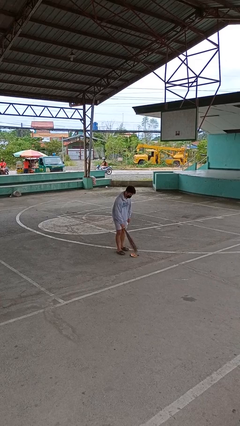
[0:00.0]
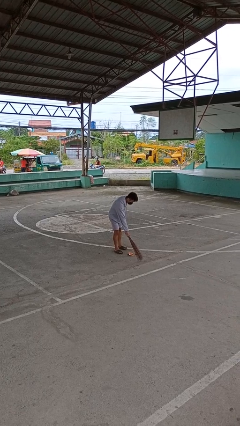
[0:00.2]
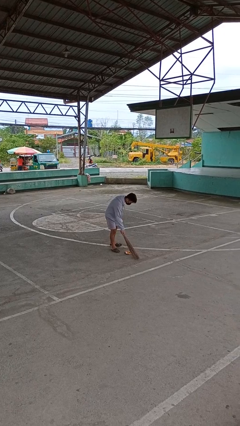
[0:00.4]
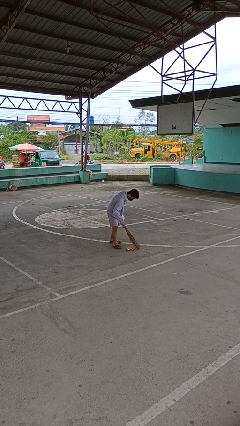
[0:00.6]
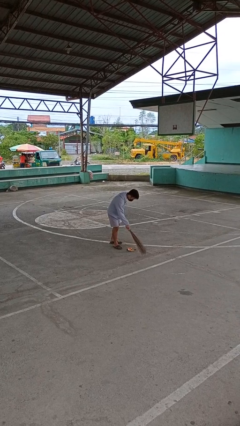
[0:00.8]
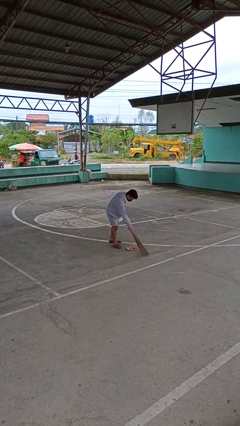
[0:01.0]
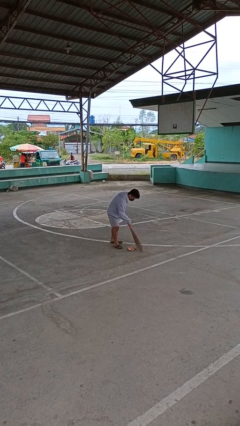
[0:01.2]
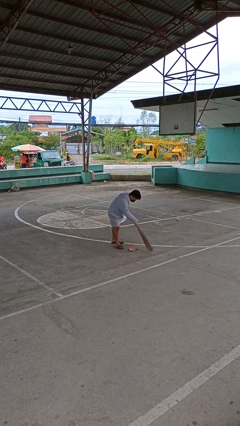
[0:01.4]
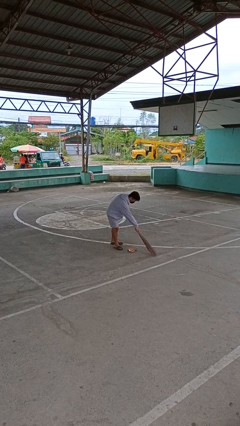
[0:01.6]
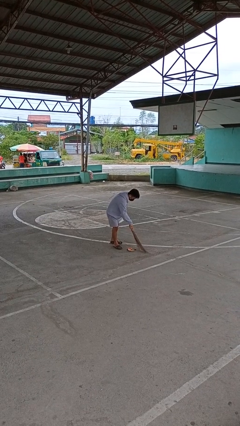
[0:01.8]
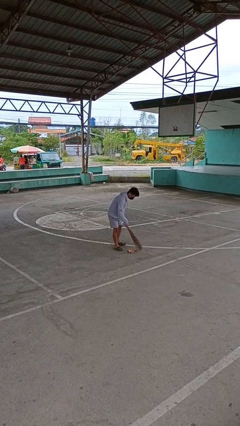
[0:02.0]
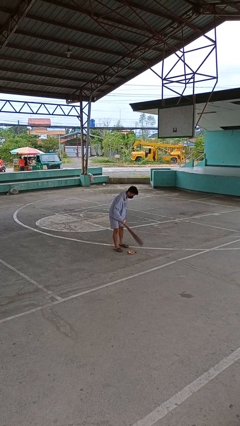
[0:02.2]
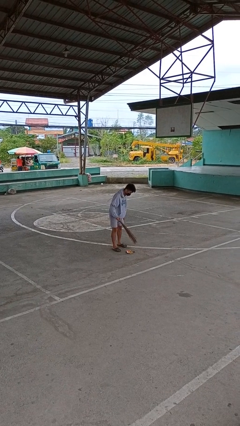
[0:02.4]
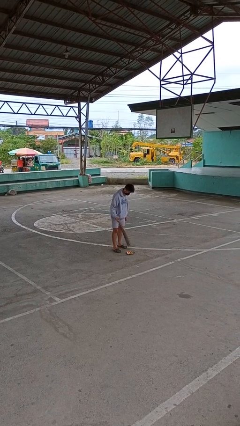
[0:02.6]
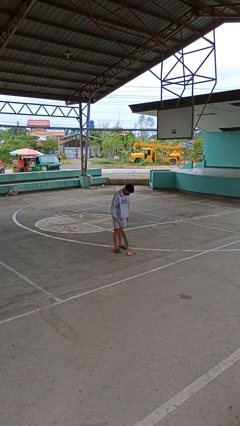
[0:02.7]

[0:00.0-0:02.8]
person sweeps floor

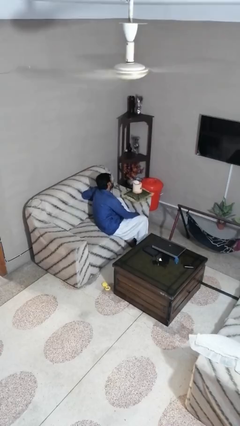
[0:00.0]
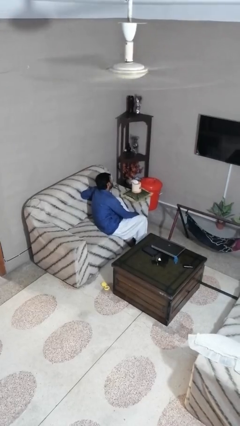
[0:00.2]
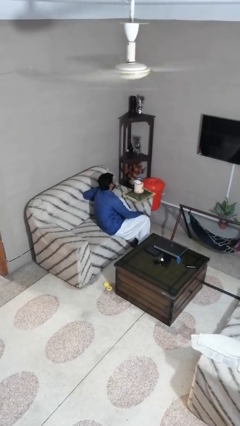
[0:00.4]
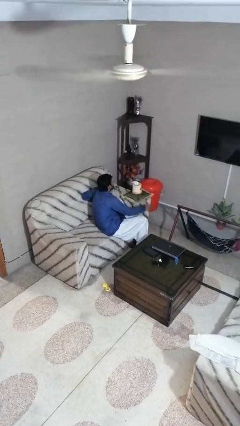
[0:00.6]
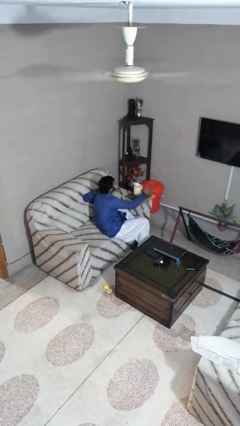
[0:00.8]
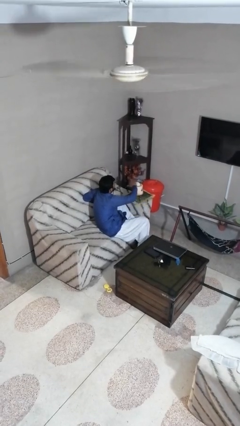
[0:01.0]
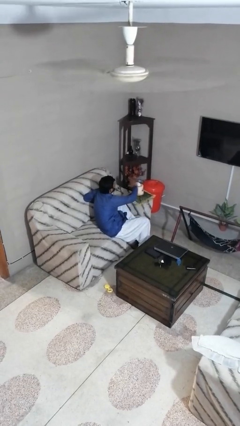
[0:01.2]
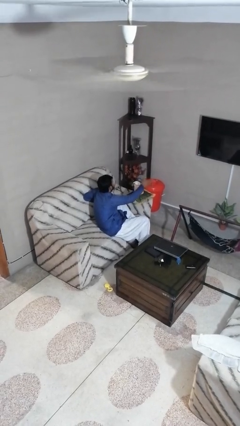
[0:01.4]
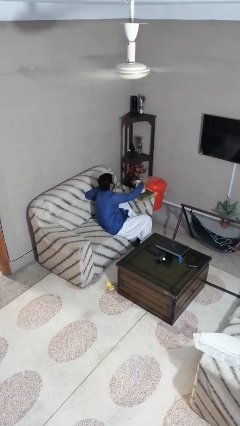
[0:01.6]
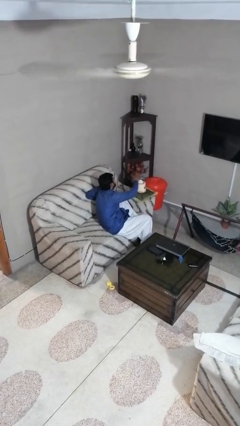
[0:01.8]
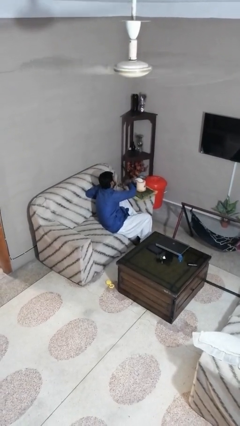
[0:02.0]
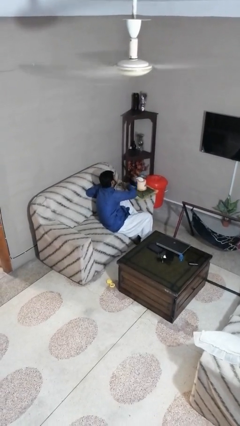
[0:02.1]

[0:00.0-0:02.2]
person waves hand over object

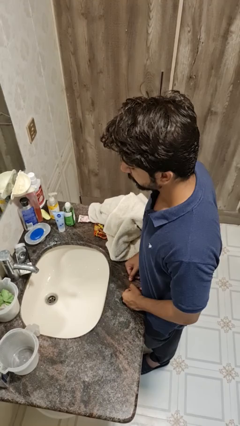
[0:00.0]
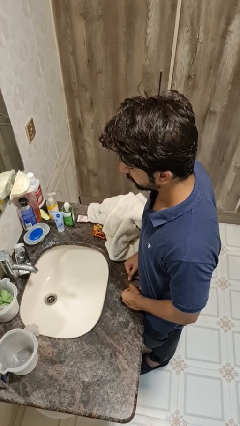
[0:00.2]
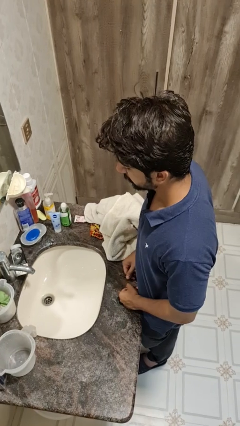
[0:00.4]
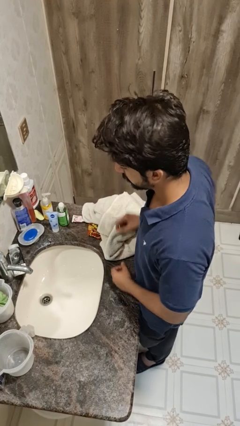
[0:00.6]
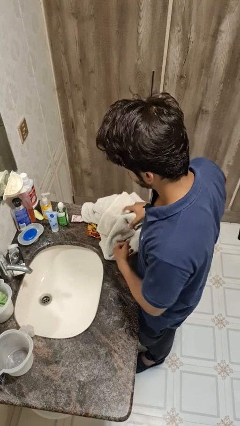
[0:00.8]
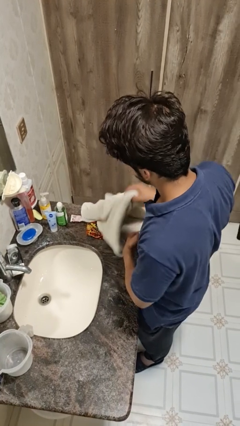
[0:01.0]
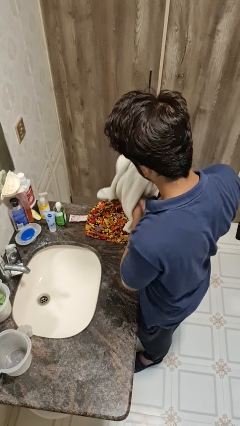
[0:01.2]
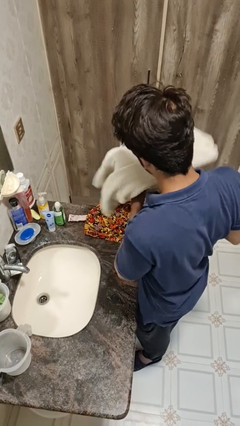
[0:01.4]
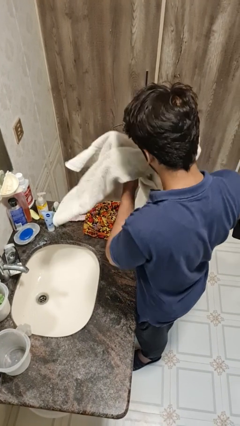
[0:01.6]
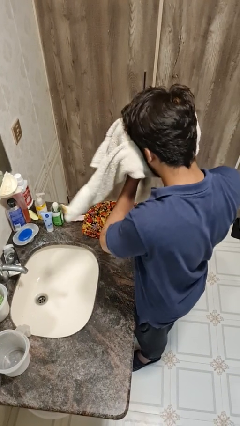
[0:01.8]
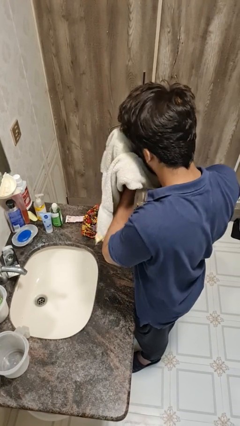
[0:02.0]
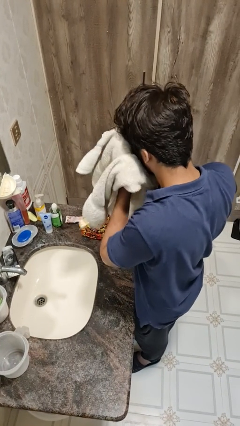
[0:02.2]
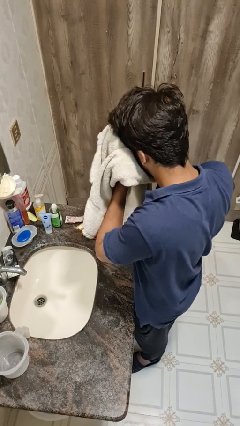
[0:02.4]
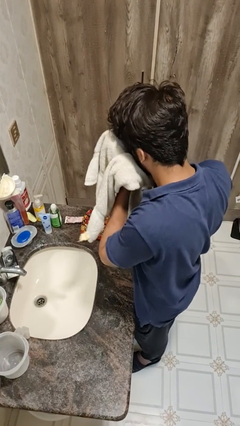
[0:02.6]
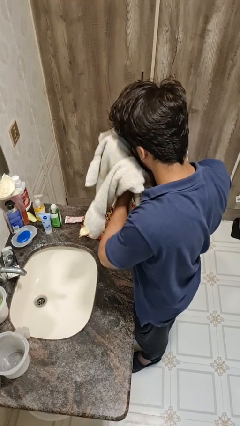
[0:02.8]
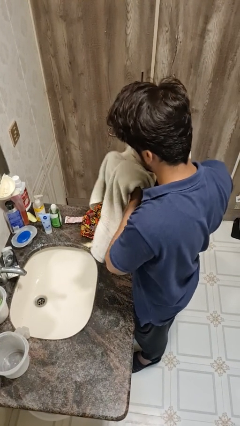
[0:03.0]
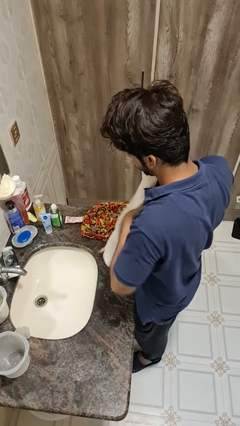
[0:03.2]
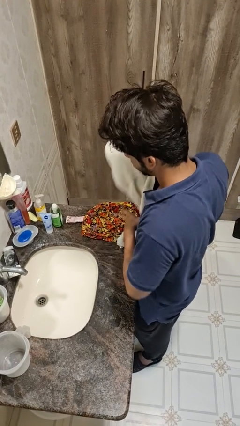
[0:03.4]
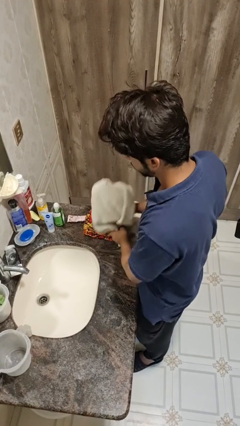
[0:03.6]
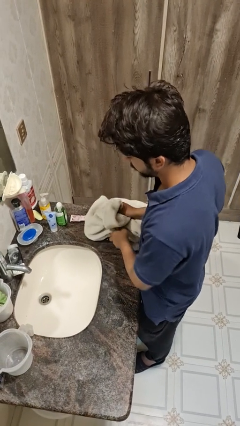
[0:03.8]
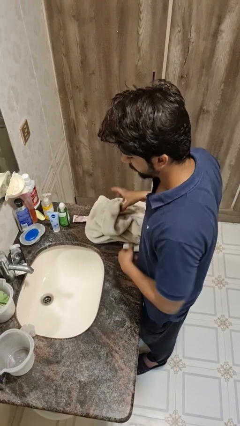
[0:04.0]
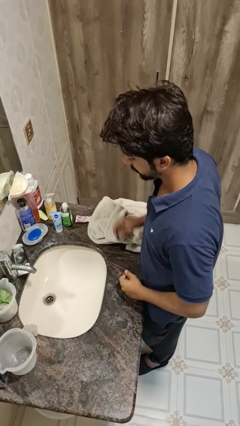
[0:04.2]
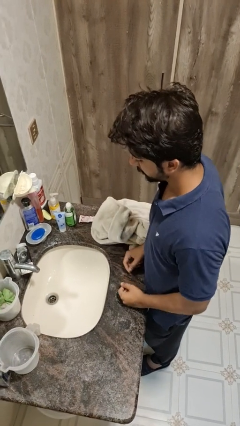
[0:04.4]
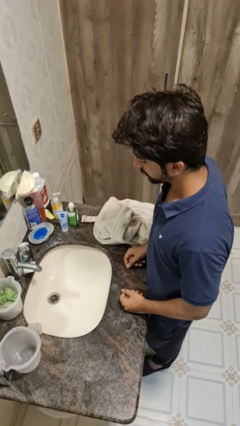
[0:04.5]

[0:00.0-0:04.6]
person dries face with towel

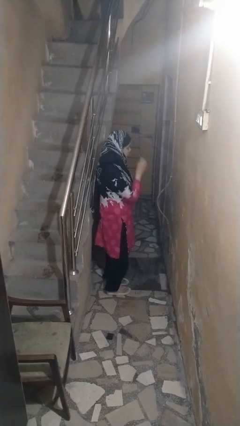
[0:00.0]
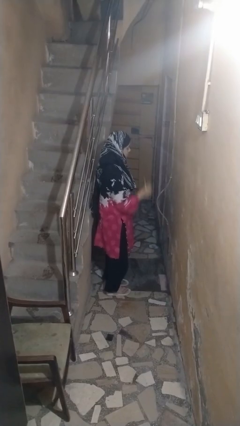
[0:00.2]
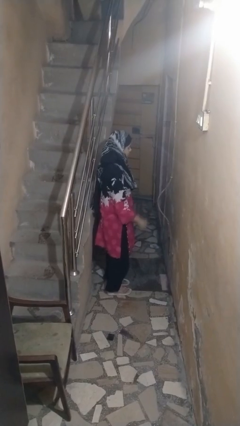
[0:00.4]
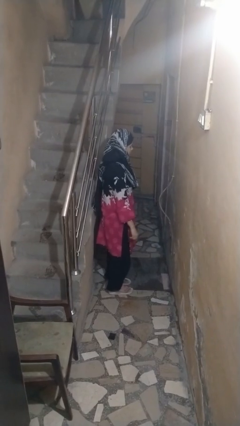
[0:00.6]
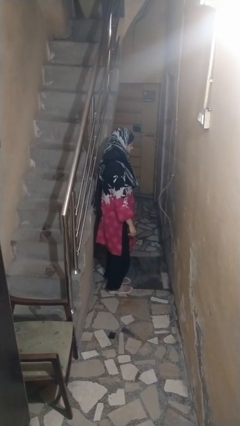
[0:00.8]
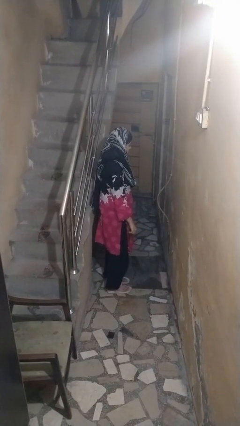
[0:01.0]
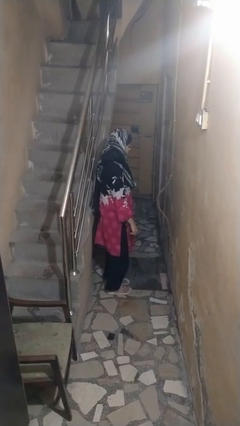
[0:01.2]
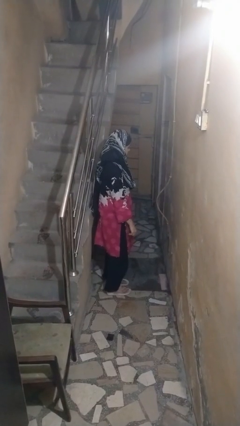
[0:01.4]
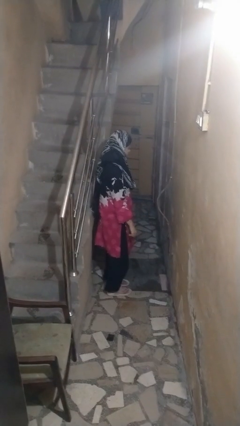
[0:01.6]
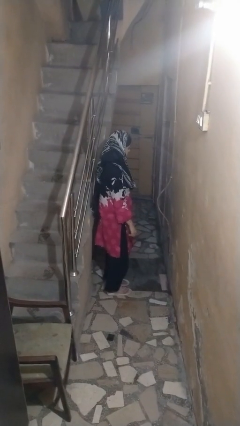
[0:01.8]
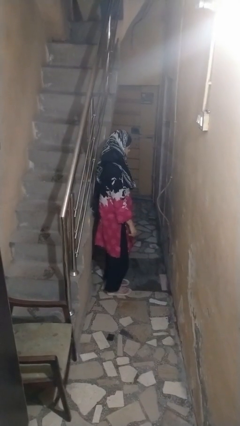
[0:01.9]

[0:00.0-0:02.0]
person takes off glasses

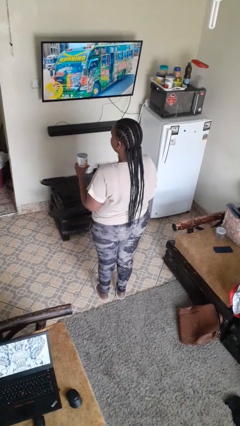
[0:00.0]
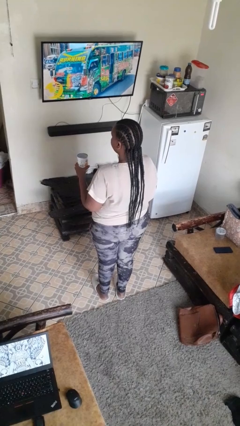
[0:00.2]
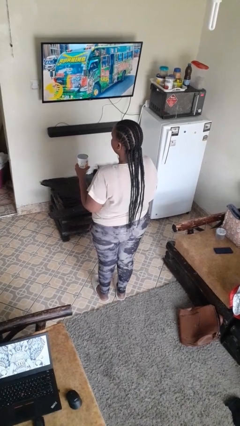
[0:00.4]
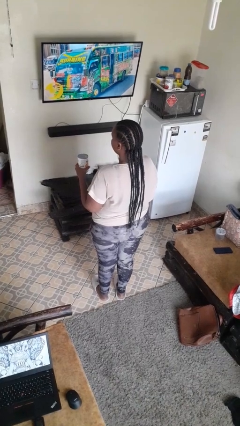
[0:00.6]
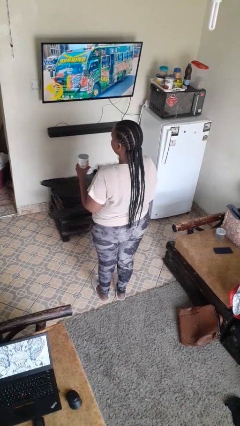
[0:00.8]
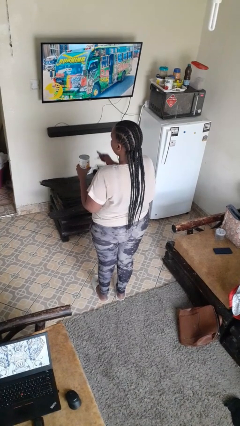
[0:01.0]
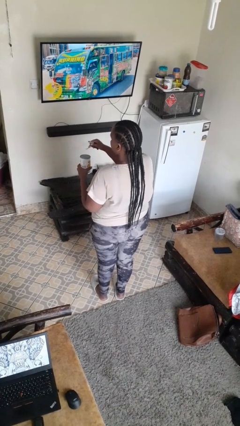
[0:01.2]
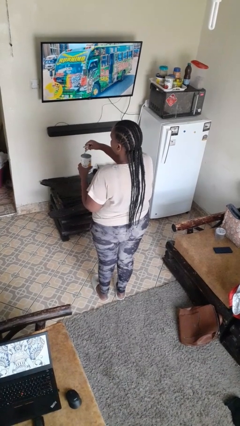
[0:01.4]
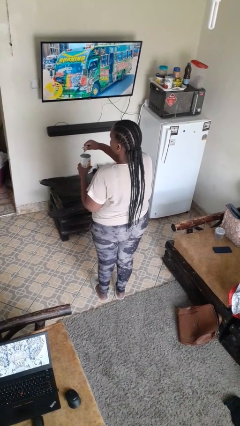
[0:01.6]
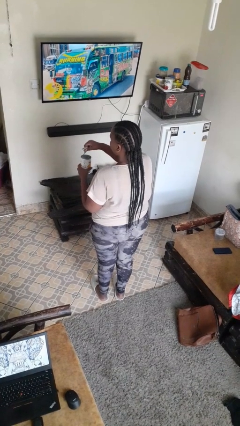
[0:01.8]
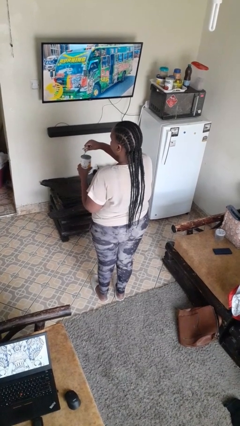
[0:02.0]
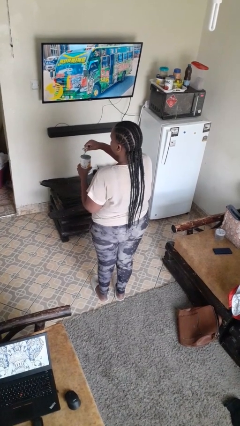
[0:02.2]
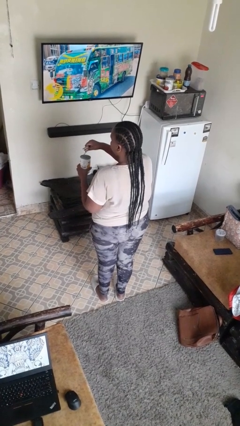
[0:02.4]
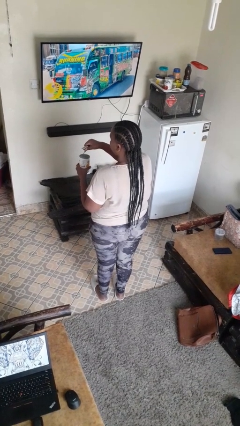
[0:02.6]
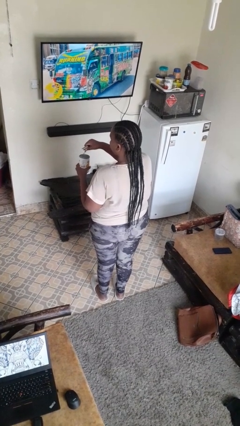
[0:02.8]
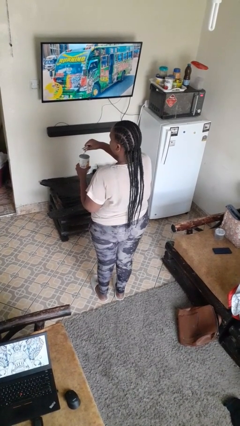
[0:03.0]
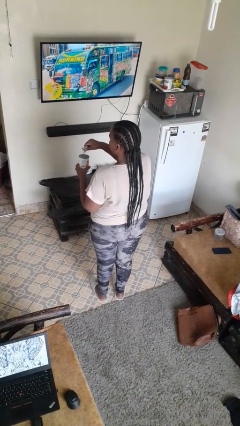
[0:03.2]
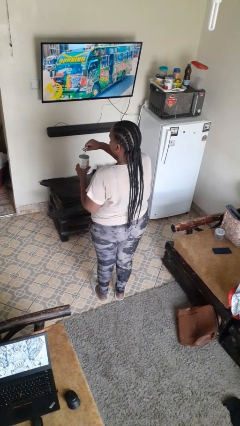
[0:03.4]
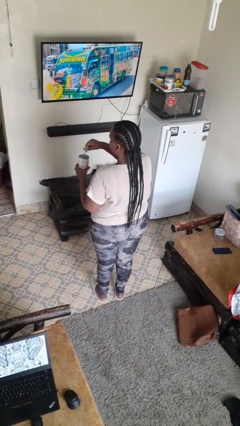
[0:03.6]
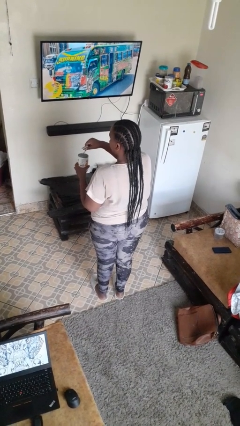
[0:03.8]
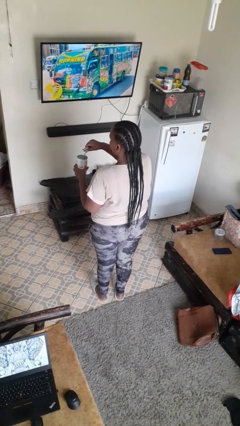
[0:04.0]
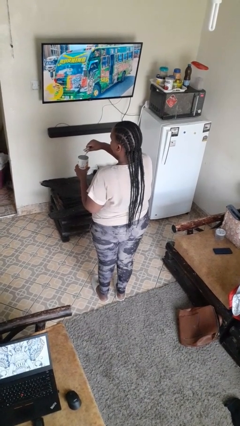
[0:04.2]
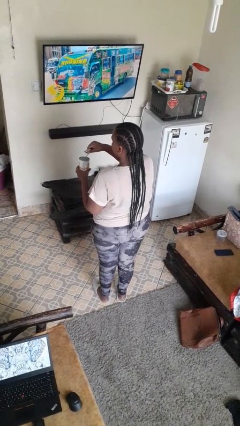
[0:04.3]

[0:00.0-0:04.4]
person opens can with can opener

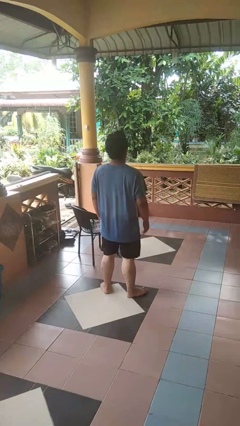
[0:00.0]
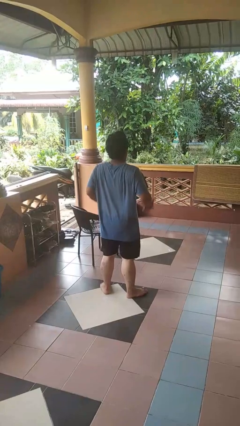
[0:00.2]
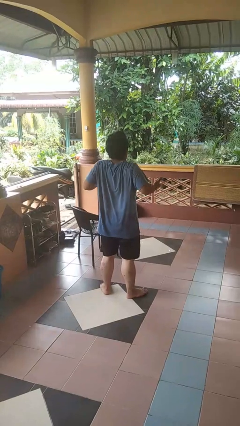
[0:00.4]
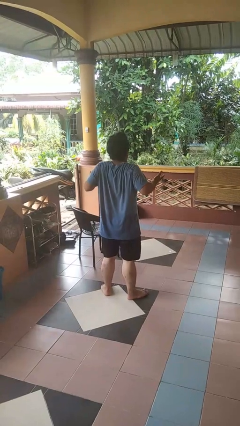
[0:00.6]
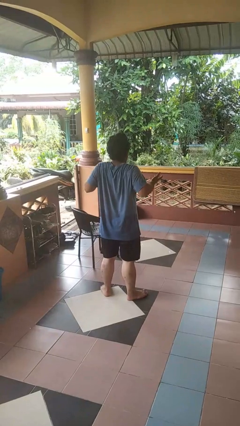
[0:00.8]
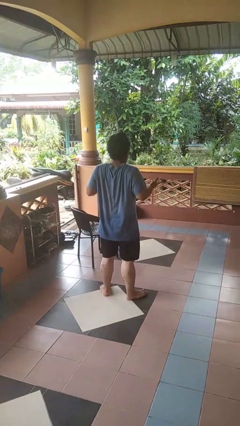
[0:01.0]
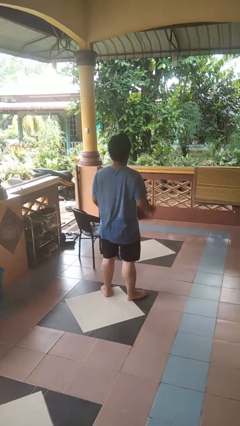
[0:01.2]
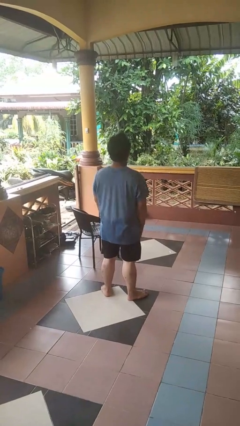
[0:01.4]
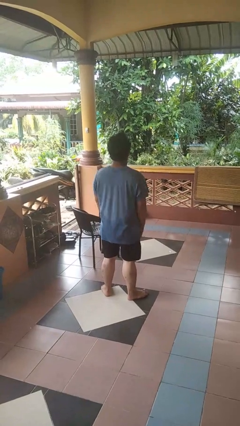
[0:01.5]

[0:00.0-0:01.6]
person shrugs
